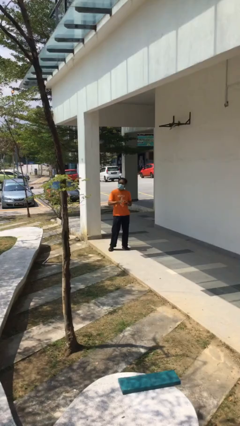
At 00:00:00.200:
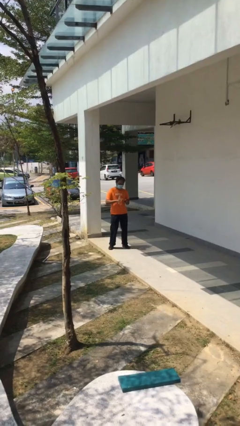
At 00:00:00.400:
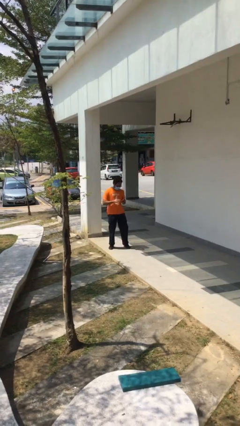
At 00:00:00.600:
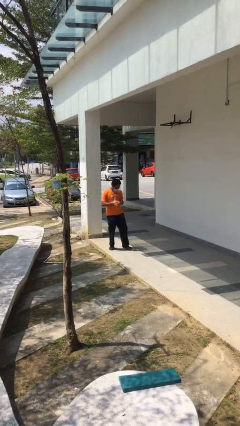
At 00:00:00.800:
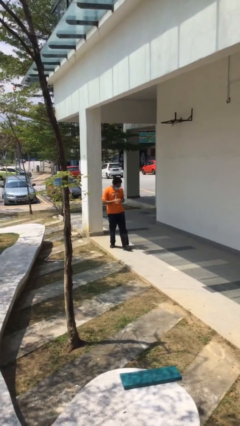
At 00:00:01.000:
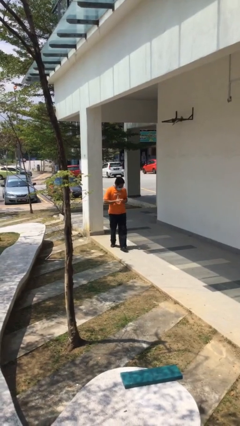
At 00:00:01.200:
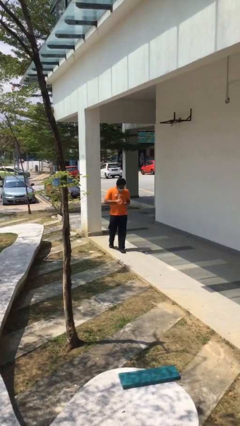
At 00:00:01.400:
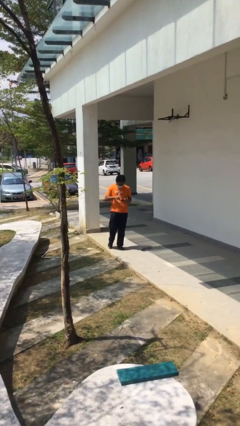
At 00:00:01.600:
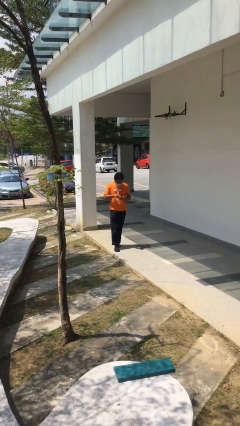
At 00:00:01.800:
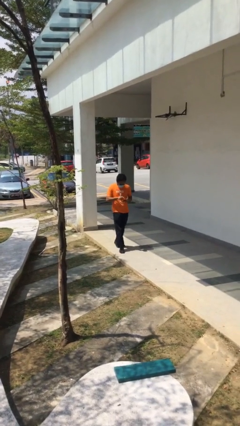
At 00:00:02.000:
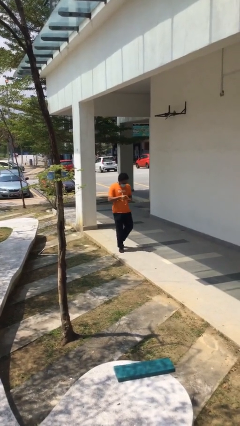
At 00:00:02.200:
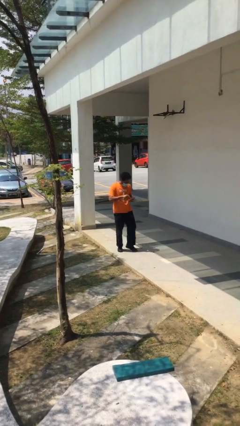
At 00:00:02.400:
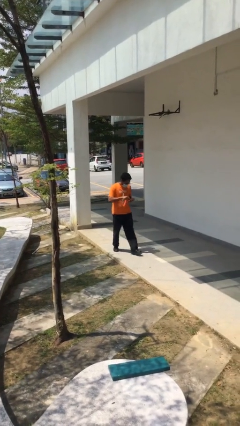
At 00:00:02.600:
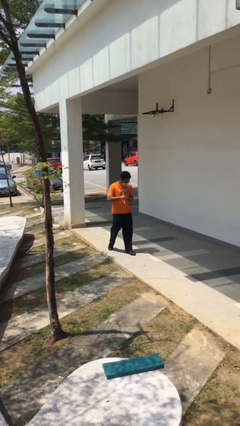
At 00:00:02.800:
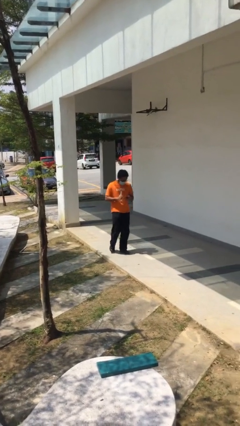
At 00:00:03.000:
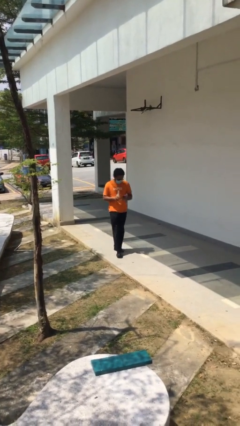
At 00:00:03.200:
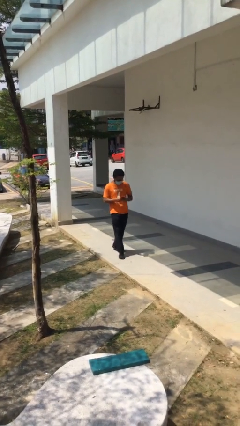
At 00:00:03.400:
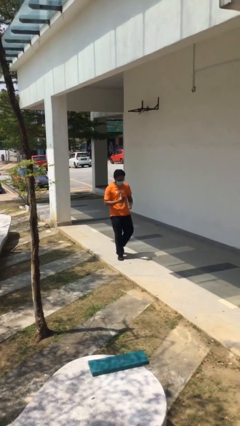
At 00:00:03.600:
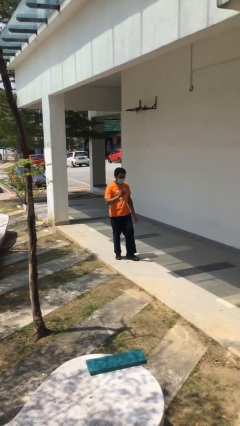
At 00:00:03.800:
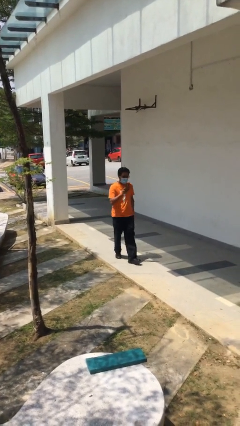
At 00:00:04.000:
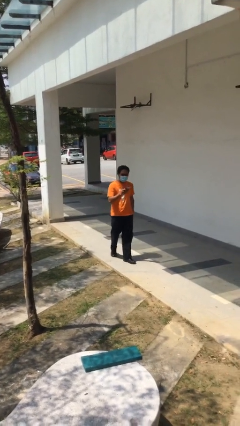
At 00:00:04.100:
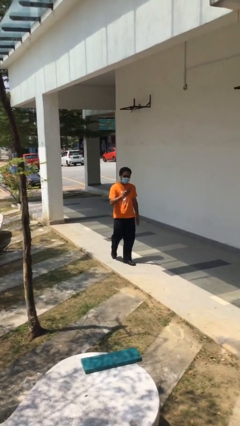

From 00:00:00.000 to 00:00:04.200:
person texts on phone

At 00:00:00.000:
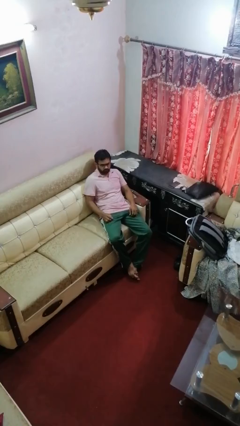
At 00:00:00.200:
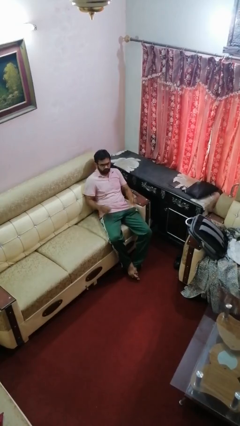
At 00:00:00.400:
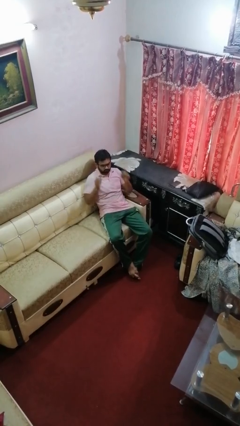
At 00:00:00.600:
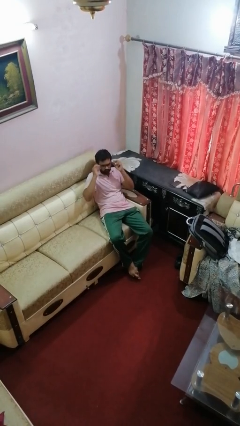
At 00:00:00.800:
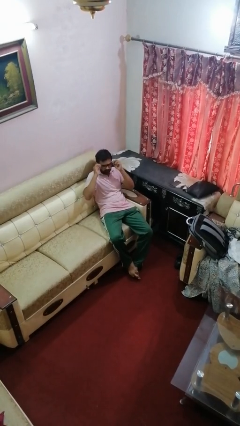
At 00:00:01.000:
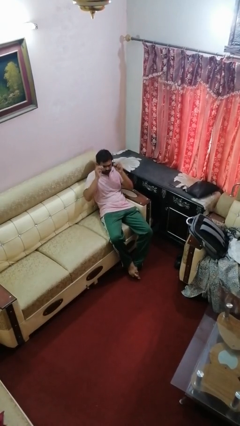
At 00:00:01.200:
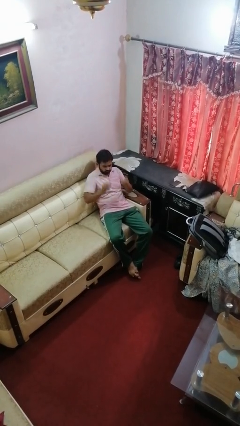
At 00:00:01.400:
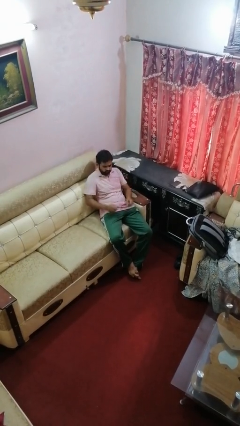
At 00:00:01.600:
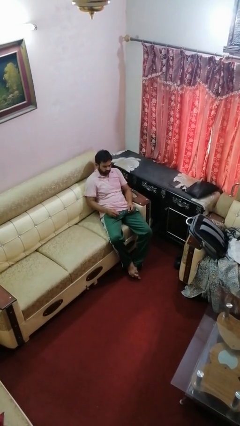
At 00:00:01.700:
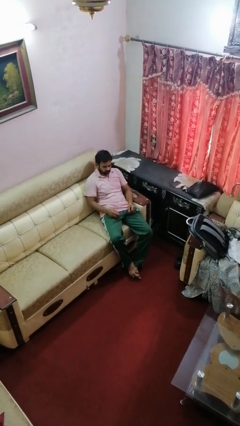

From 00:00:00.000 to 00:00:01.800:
person takes off glasses

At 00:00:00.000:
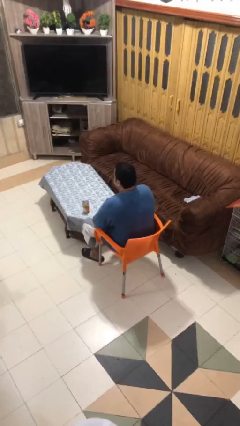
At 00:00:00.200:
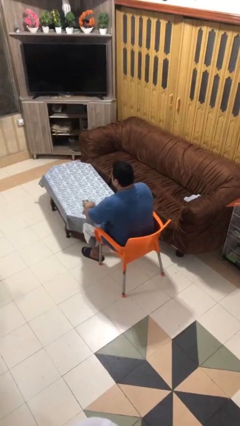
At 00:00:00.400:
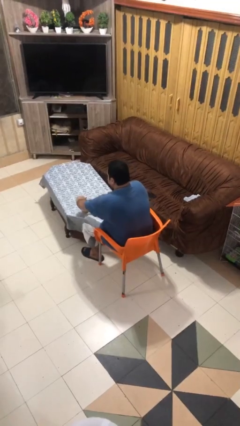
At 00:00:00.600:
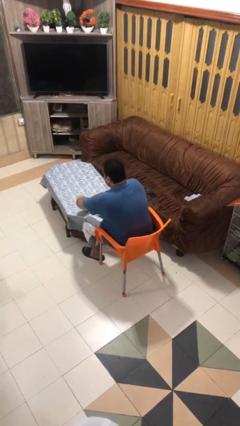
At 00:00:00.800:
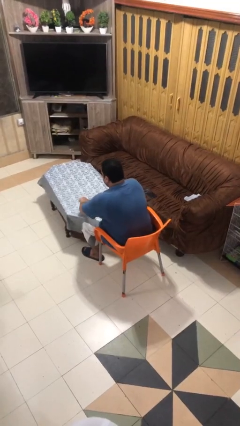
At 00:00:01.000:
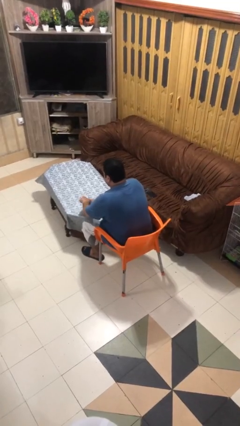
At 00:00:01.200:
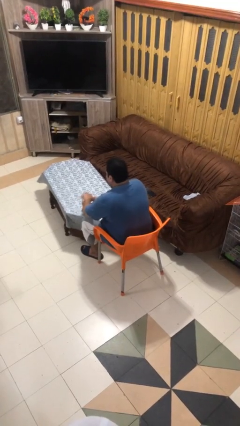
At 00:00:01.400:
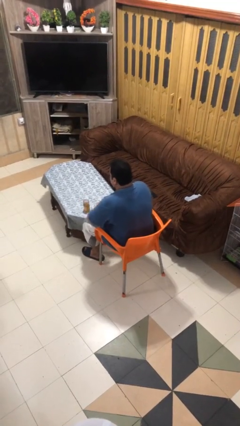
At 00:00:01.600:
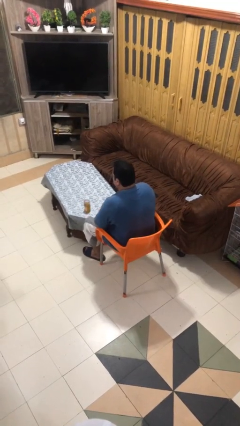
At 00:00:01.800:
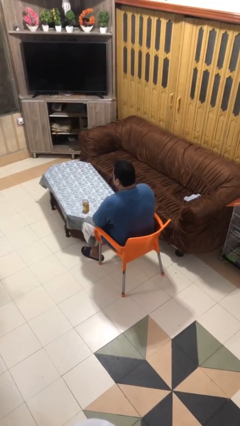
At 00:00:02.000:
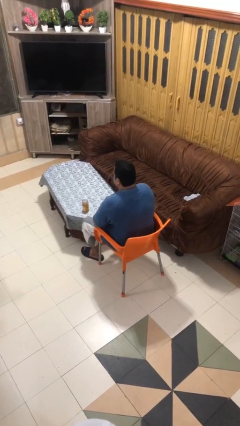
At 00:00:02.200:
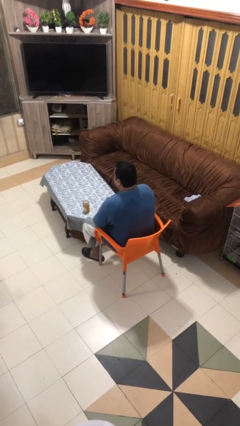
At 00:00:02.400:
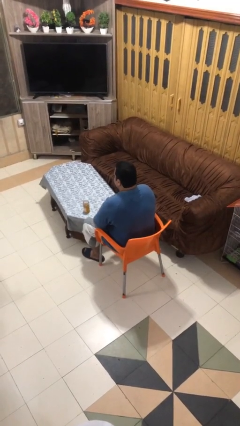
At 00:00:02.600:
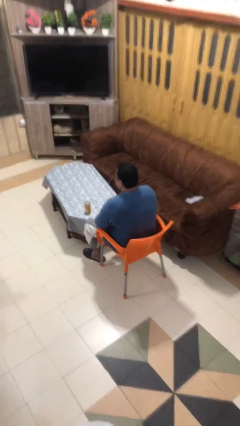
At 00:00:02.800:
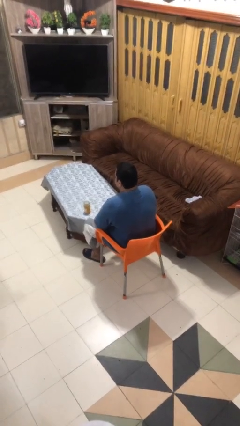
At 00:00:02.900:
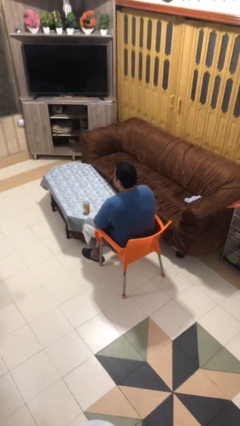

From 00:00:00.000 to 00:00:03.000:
person opens jar

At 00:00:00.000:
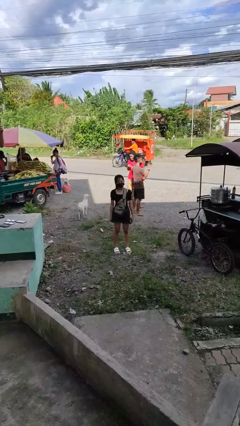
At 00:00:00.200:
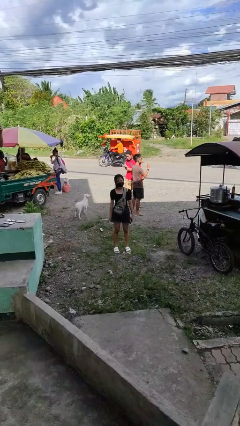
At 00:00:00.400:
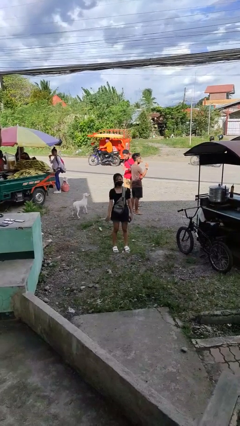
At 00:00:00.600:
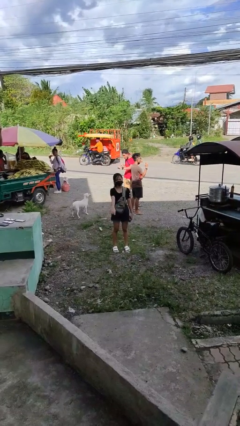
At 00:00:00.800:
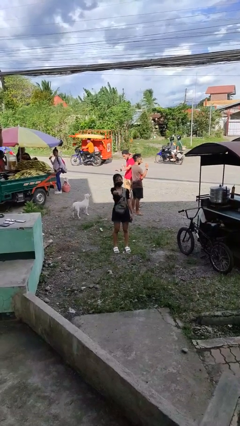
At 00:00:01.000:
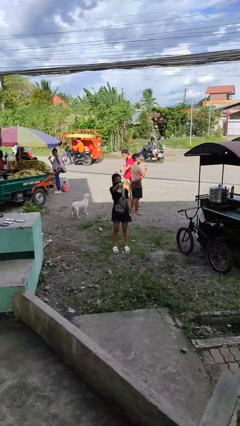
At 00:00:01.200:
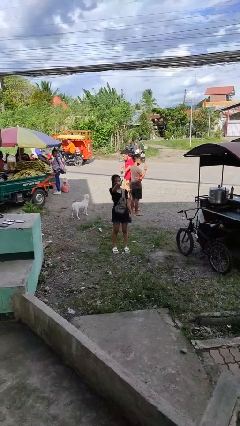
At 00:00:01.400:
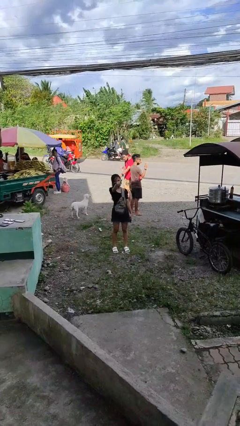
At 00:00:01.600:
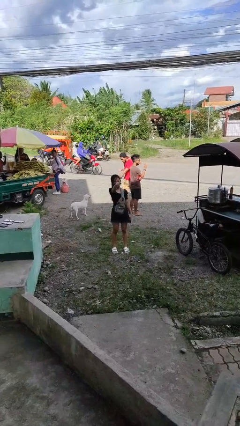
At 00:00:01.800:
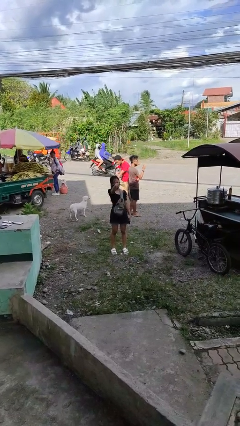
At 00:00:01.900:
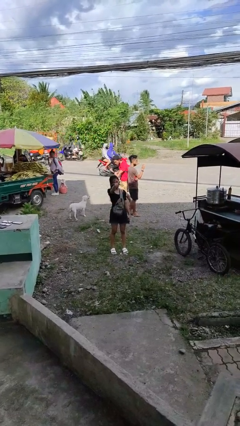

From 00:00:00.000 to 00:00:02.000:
person points at person

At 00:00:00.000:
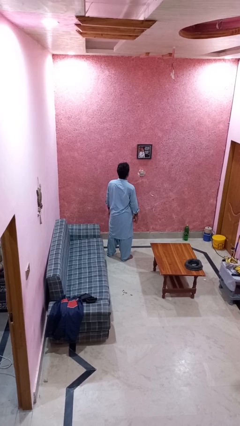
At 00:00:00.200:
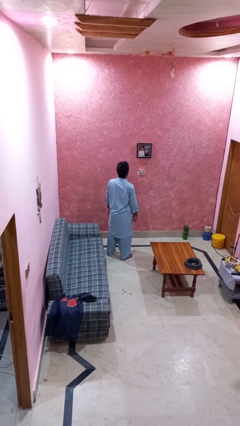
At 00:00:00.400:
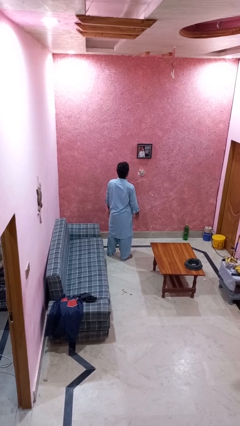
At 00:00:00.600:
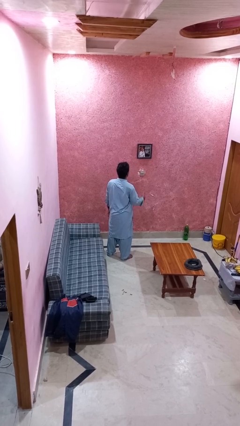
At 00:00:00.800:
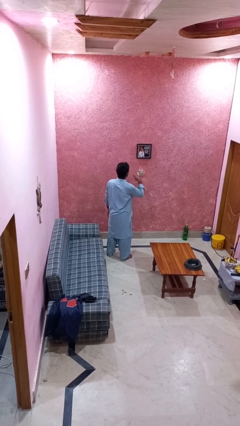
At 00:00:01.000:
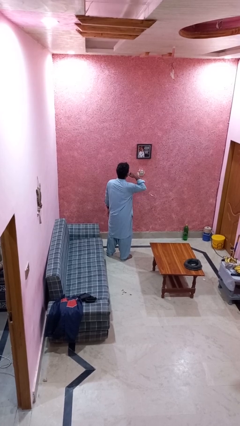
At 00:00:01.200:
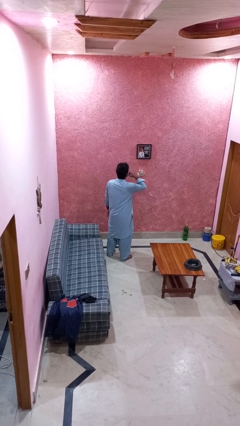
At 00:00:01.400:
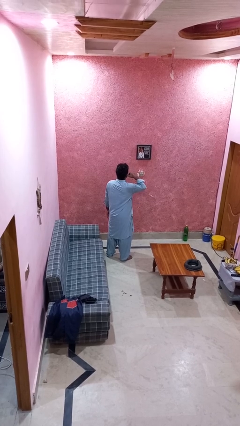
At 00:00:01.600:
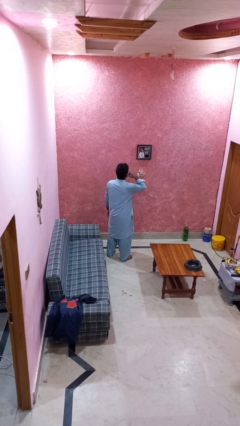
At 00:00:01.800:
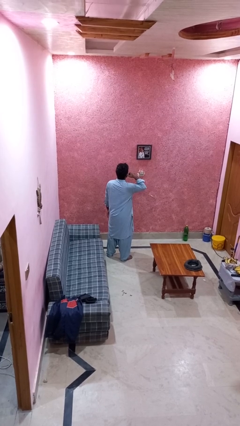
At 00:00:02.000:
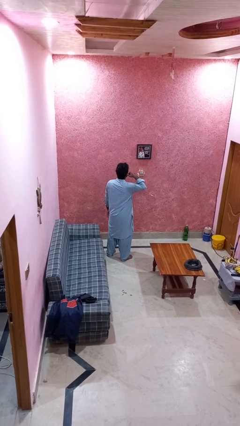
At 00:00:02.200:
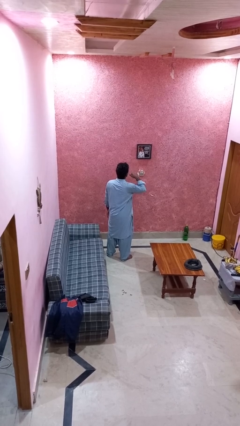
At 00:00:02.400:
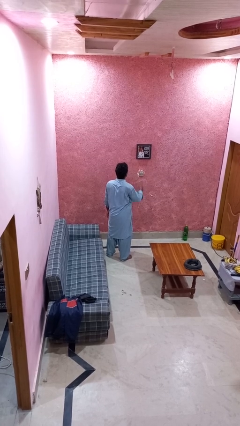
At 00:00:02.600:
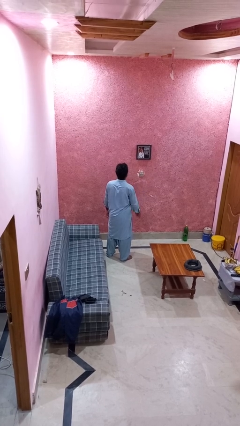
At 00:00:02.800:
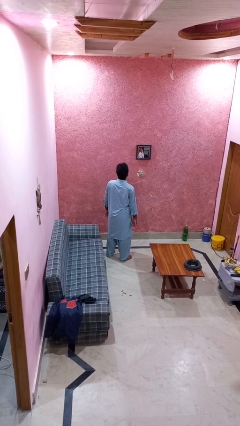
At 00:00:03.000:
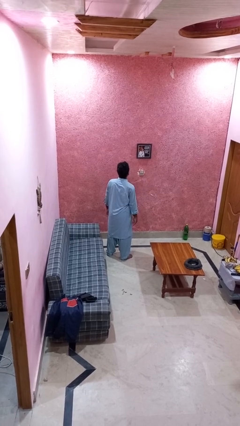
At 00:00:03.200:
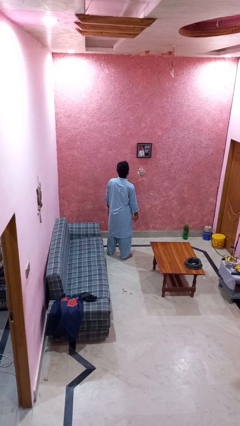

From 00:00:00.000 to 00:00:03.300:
person gestures call me

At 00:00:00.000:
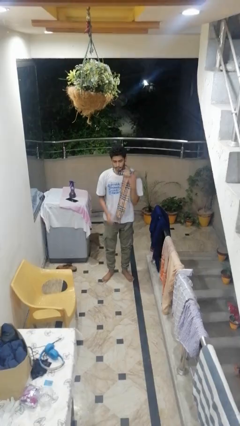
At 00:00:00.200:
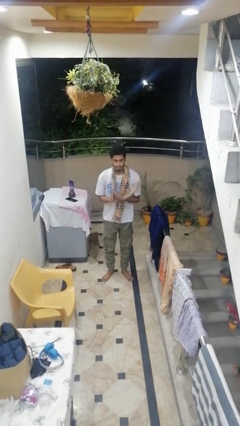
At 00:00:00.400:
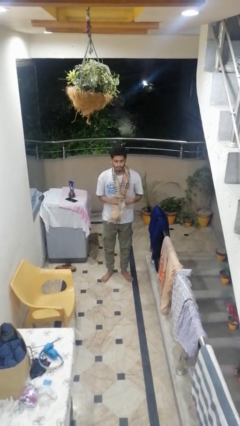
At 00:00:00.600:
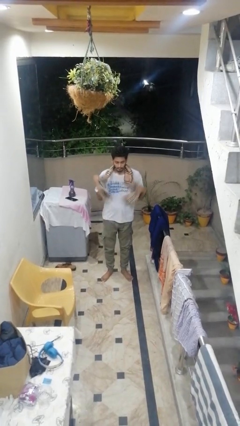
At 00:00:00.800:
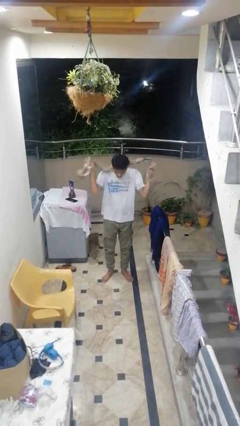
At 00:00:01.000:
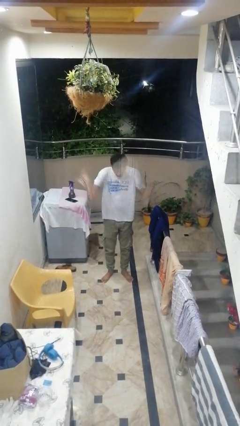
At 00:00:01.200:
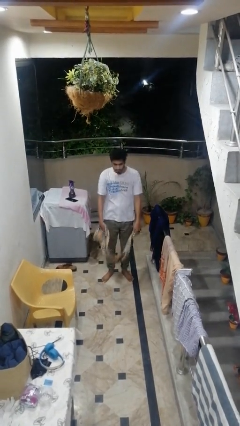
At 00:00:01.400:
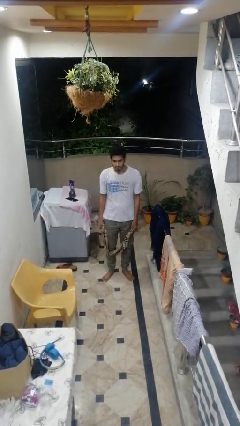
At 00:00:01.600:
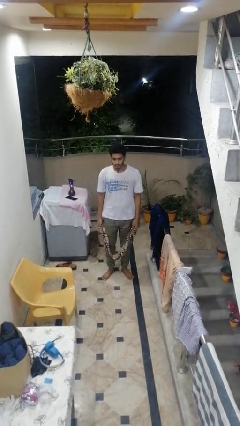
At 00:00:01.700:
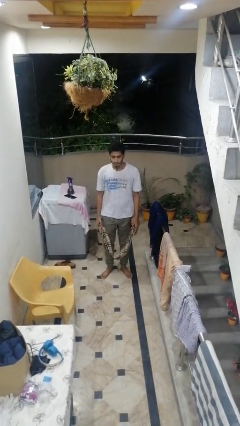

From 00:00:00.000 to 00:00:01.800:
person takes off scarf

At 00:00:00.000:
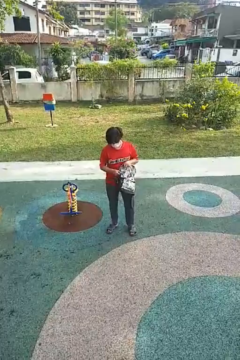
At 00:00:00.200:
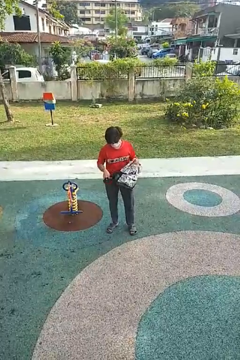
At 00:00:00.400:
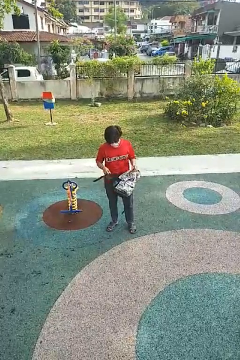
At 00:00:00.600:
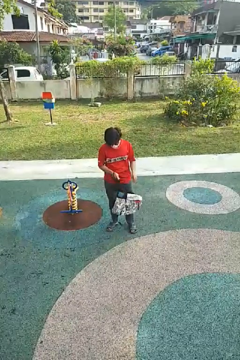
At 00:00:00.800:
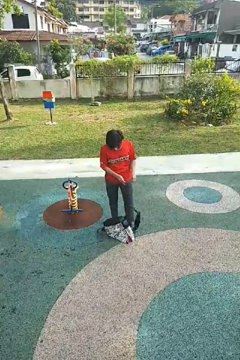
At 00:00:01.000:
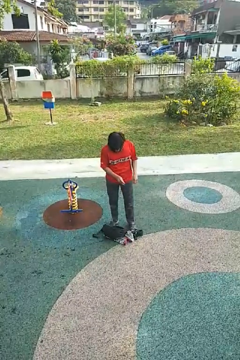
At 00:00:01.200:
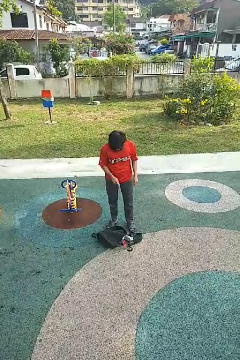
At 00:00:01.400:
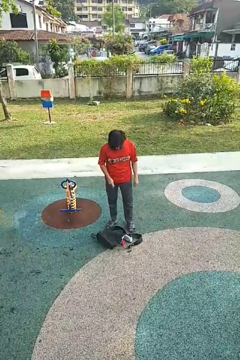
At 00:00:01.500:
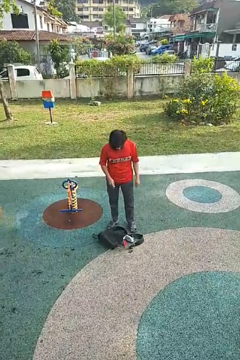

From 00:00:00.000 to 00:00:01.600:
person drops object
